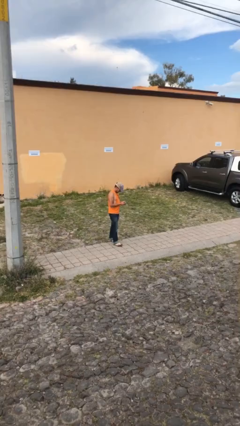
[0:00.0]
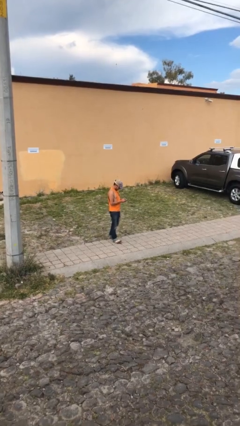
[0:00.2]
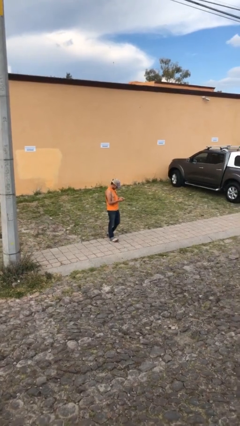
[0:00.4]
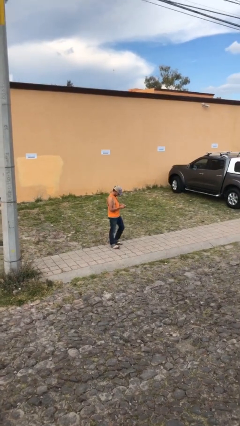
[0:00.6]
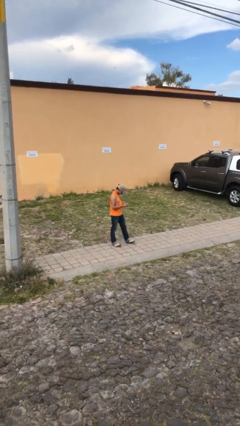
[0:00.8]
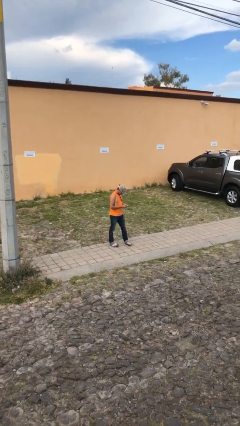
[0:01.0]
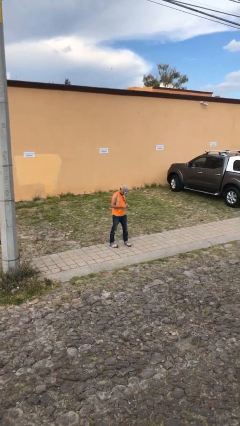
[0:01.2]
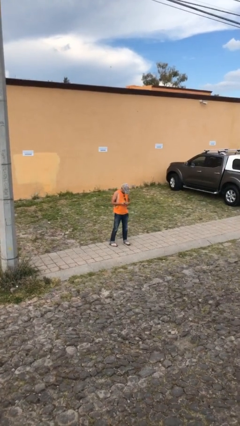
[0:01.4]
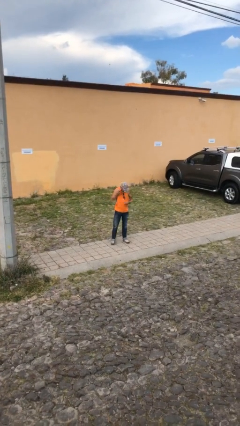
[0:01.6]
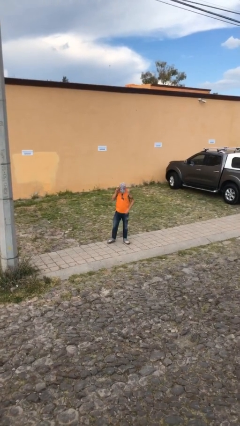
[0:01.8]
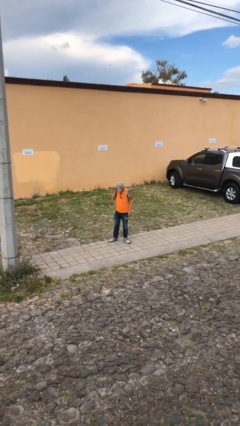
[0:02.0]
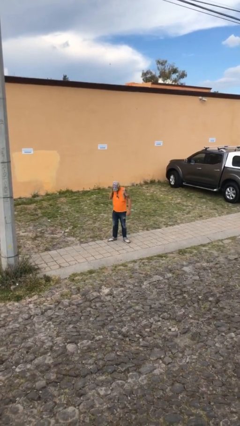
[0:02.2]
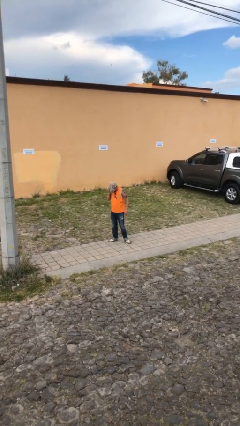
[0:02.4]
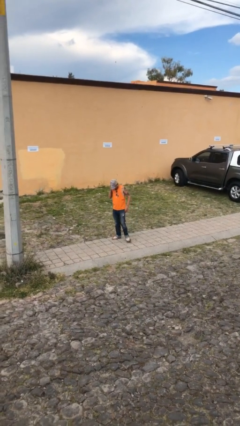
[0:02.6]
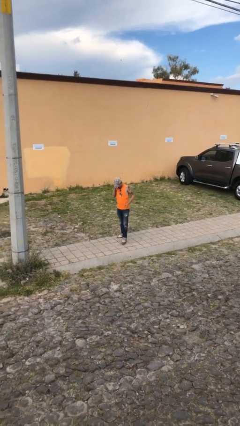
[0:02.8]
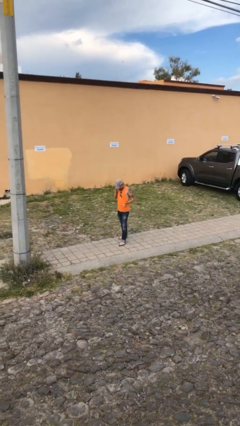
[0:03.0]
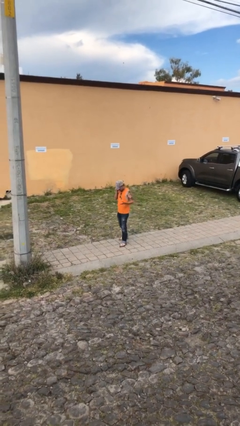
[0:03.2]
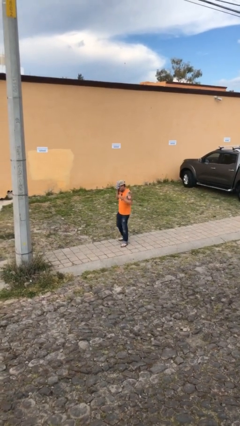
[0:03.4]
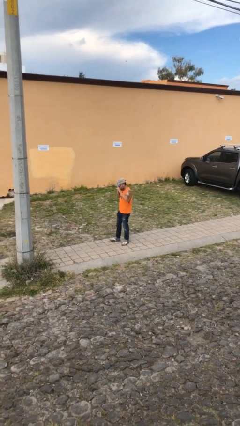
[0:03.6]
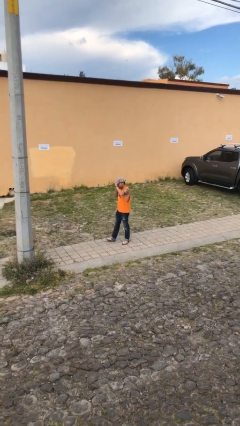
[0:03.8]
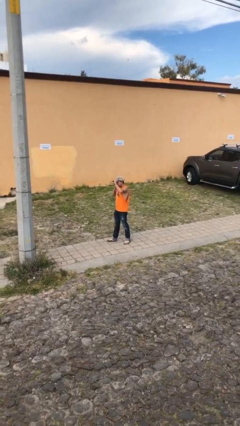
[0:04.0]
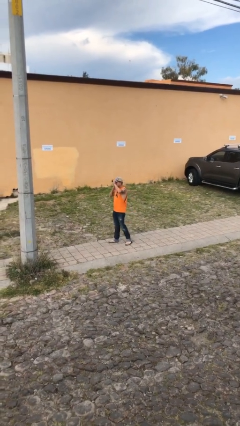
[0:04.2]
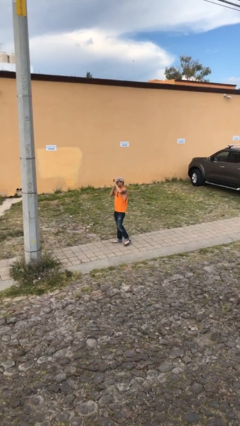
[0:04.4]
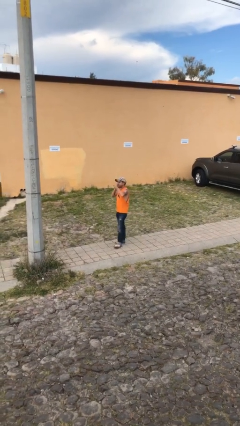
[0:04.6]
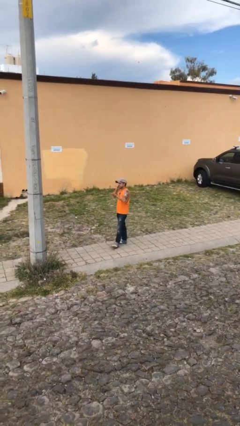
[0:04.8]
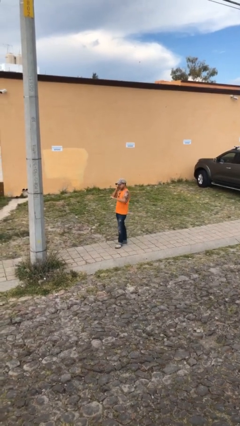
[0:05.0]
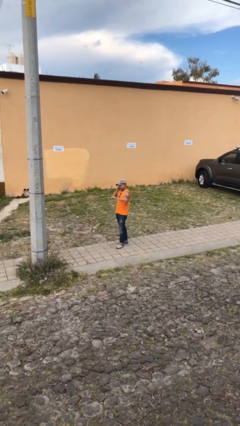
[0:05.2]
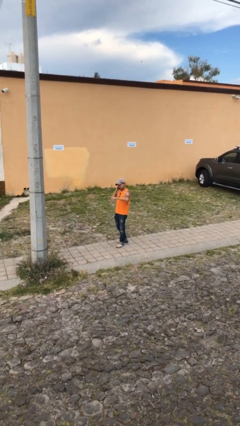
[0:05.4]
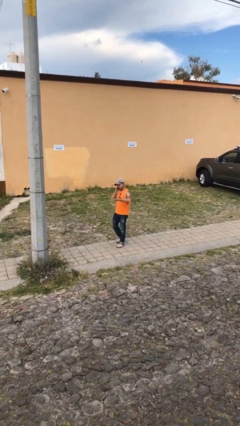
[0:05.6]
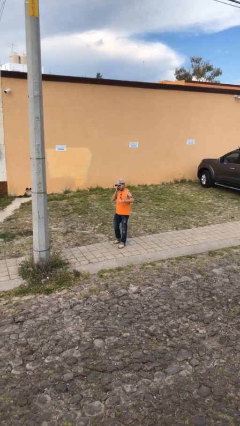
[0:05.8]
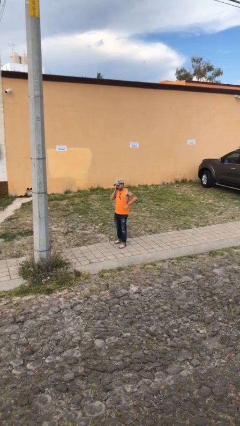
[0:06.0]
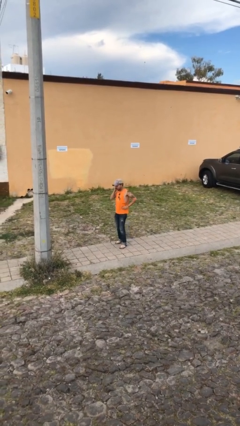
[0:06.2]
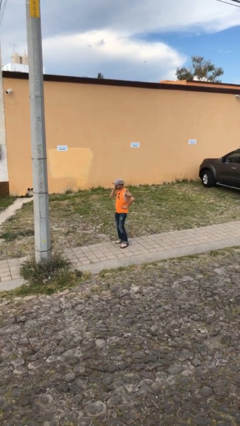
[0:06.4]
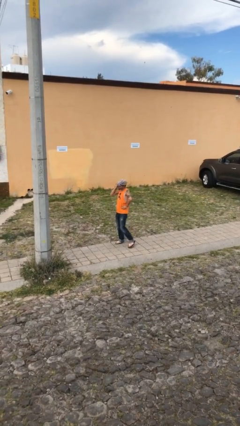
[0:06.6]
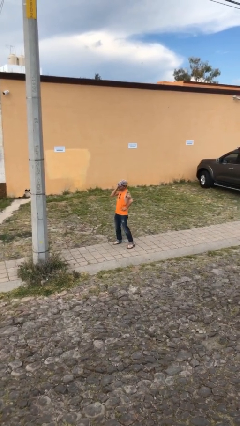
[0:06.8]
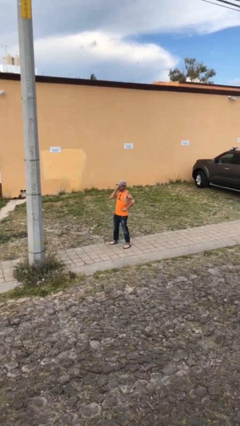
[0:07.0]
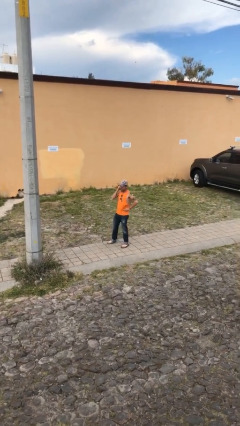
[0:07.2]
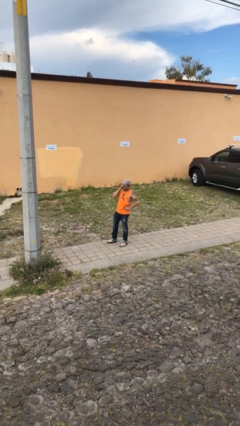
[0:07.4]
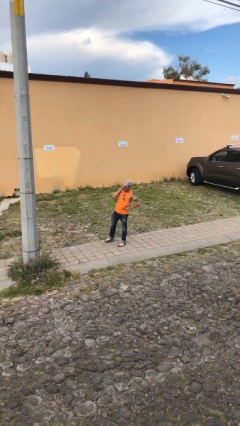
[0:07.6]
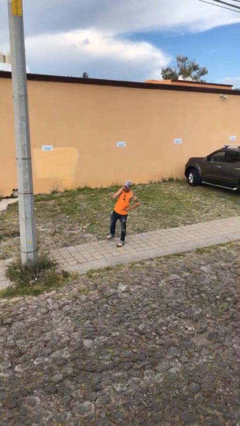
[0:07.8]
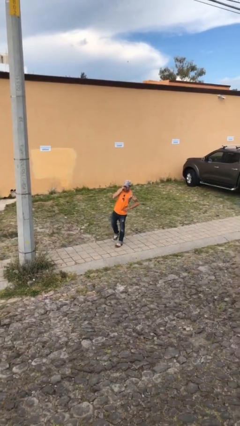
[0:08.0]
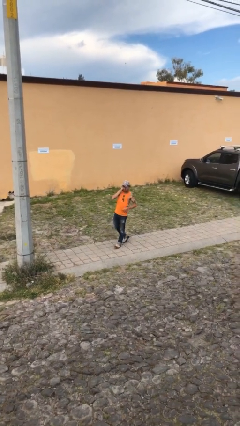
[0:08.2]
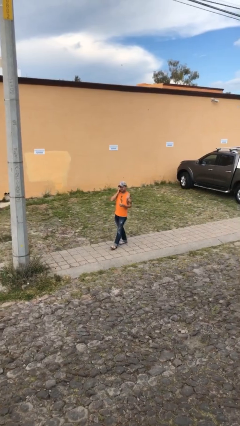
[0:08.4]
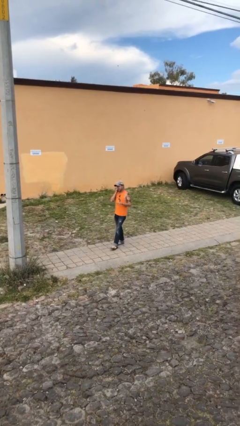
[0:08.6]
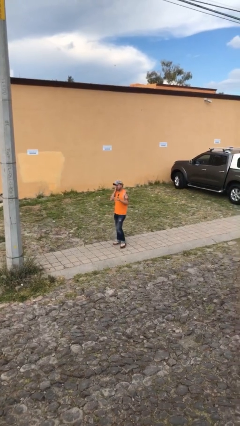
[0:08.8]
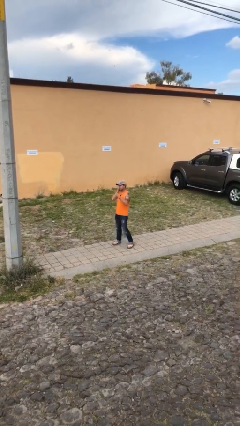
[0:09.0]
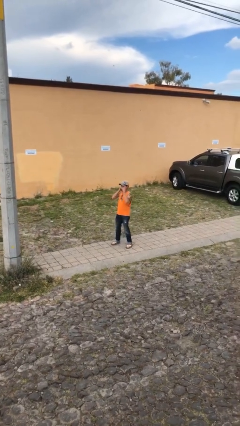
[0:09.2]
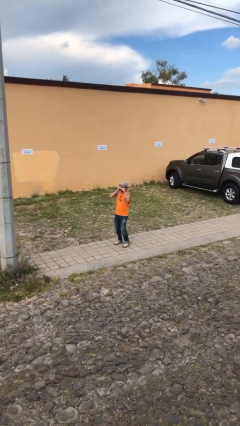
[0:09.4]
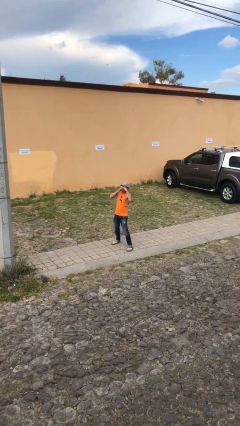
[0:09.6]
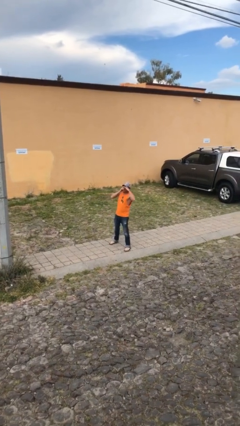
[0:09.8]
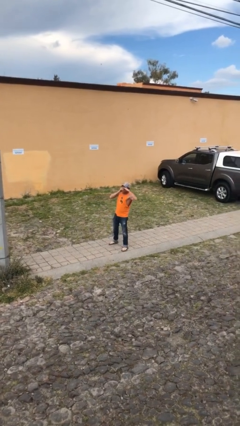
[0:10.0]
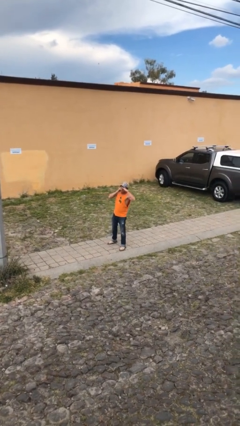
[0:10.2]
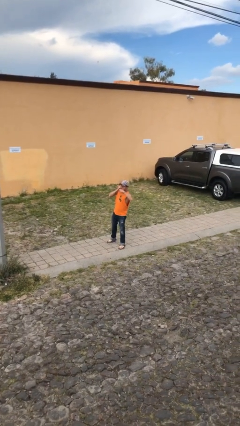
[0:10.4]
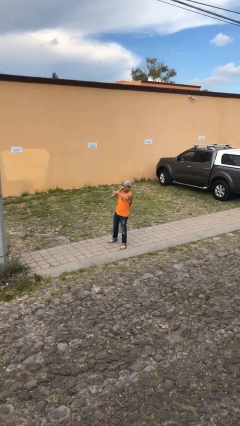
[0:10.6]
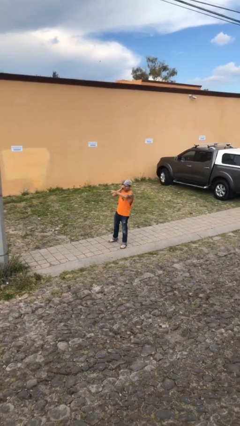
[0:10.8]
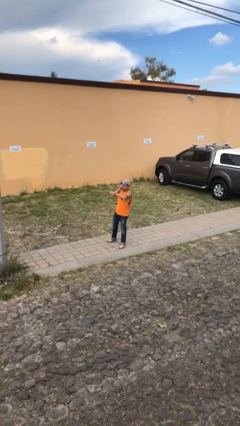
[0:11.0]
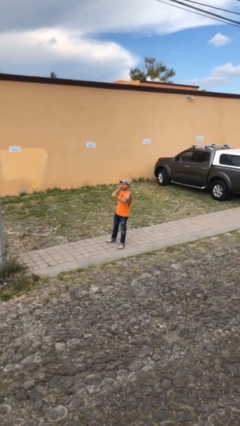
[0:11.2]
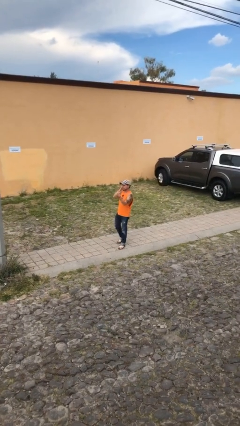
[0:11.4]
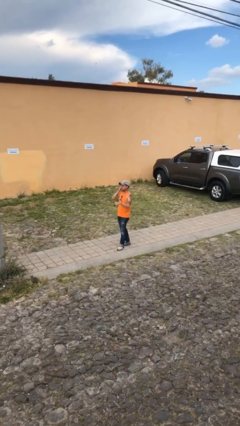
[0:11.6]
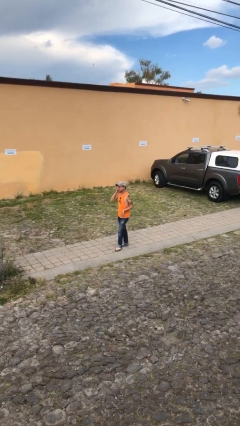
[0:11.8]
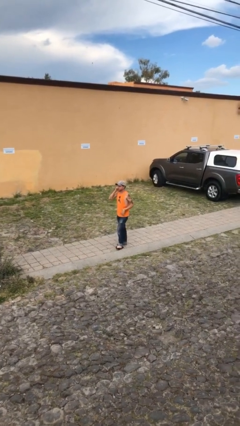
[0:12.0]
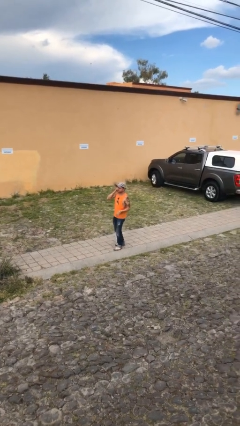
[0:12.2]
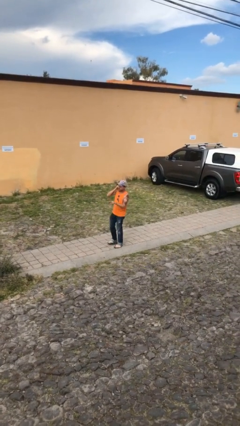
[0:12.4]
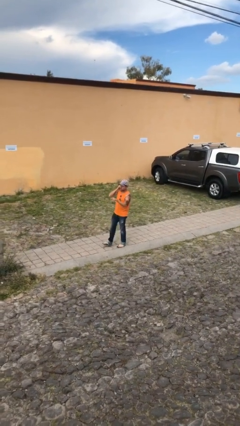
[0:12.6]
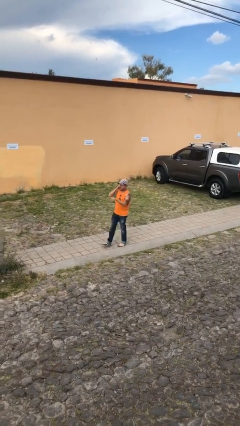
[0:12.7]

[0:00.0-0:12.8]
person talks on phone

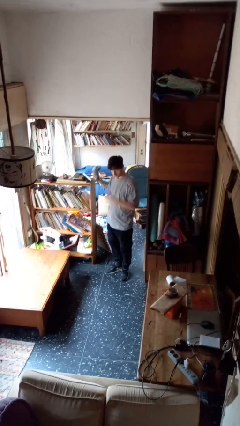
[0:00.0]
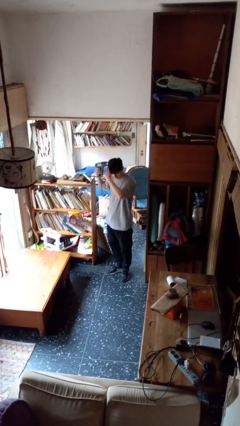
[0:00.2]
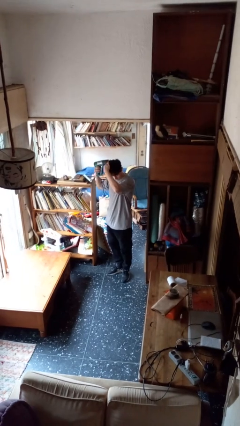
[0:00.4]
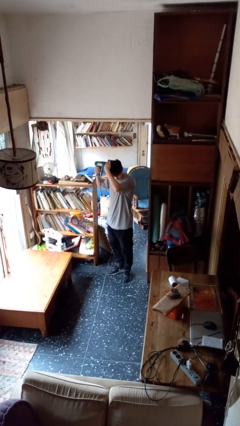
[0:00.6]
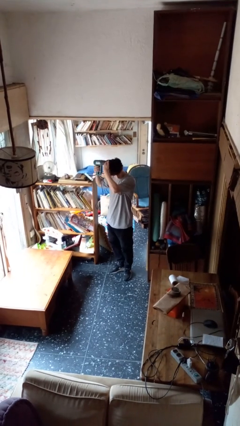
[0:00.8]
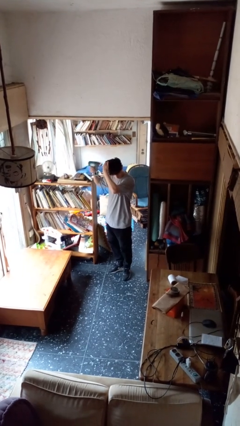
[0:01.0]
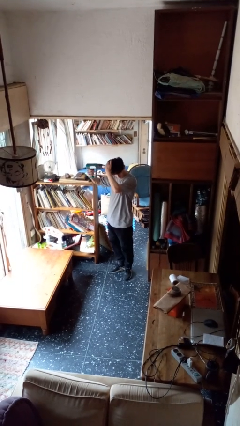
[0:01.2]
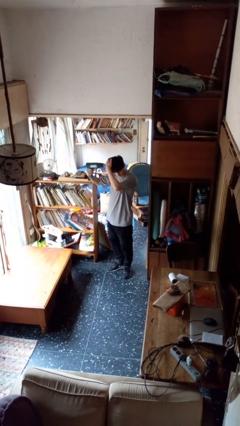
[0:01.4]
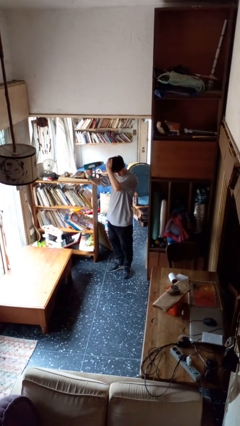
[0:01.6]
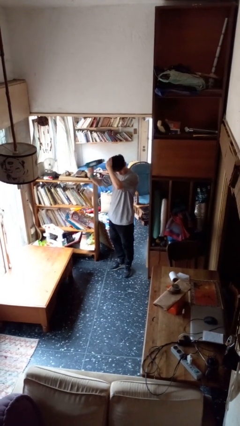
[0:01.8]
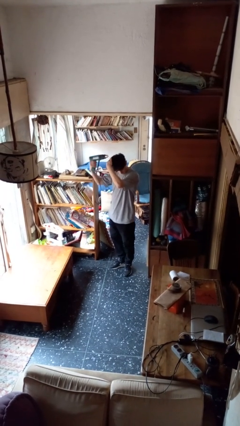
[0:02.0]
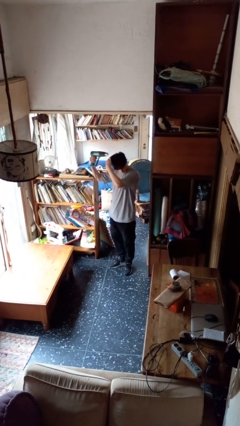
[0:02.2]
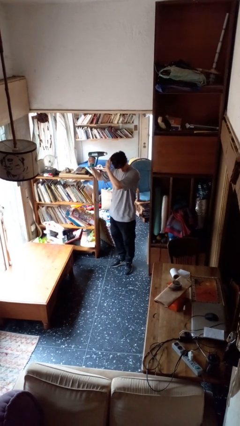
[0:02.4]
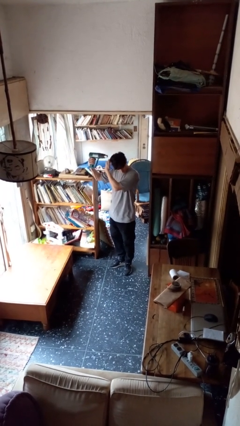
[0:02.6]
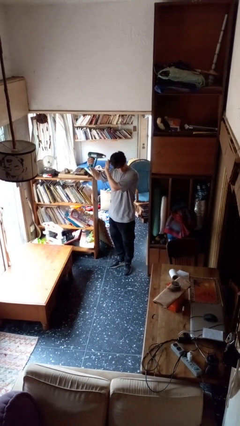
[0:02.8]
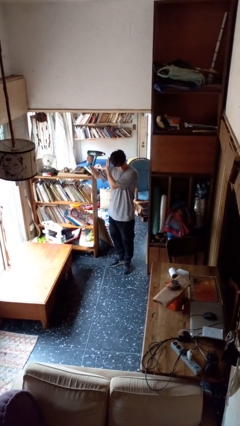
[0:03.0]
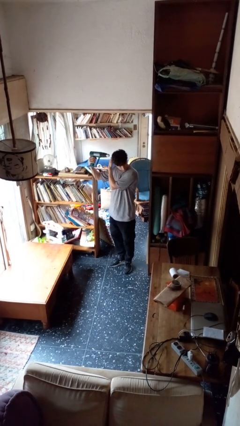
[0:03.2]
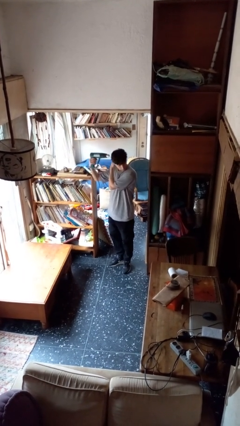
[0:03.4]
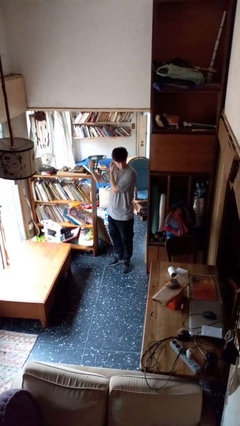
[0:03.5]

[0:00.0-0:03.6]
person dries hair with hairdryer

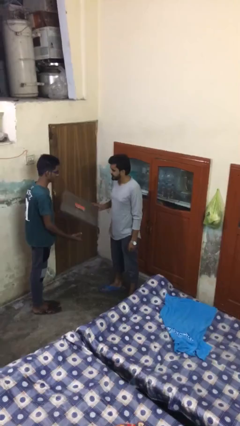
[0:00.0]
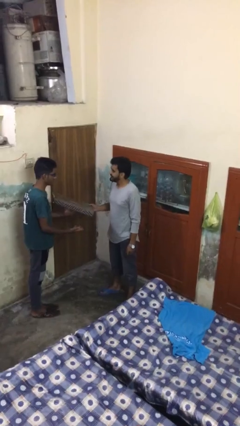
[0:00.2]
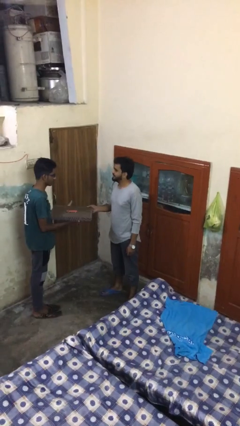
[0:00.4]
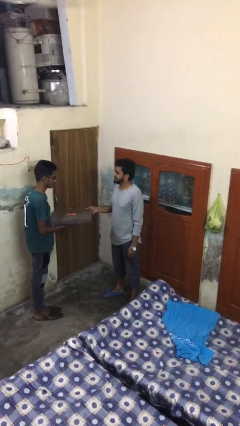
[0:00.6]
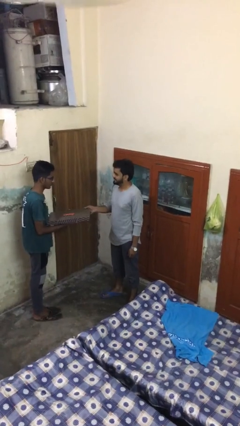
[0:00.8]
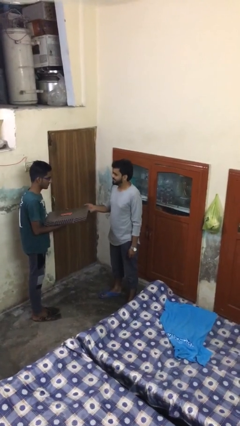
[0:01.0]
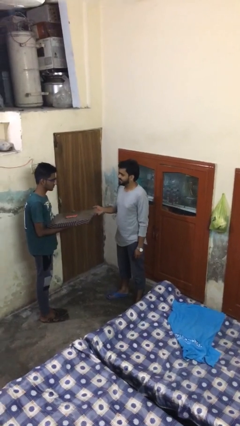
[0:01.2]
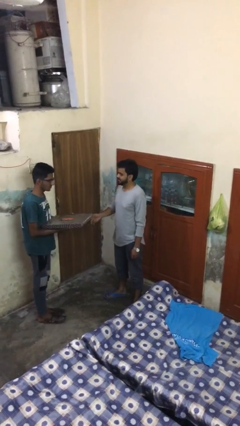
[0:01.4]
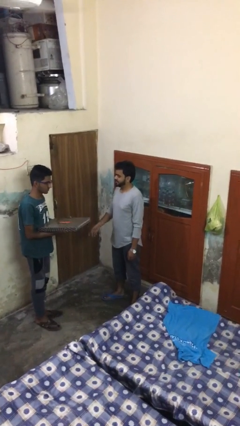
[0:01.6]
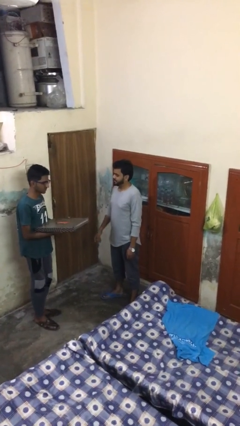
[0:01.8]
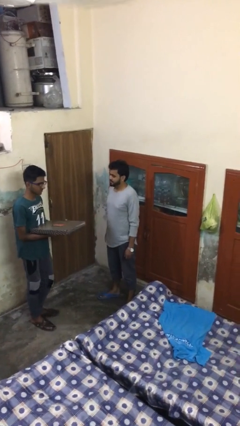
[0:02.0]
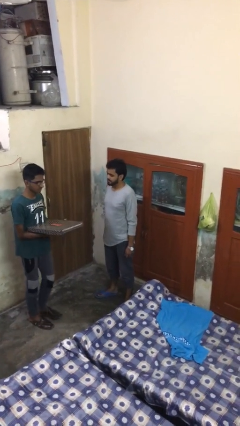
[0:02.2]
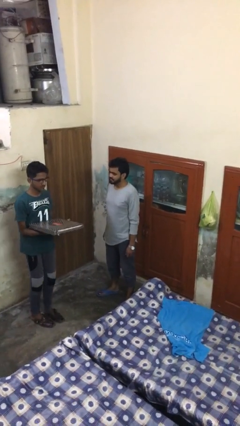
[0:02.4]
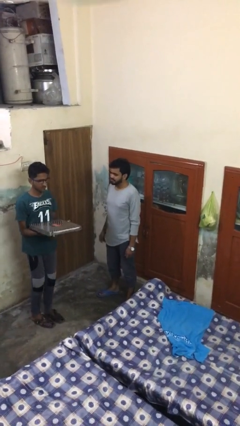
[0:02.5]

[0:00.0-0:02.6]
person transfers object to person
